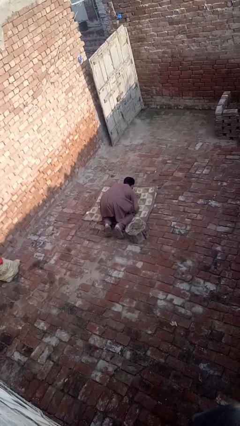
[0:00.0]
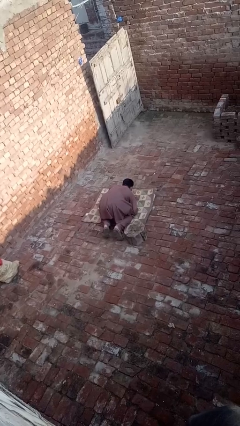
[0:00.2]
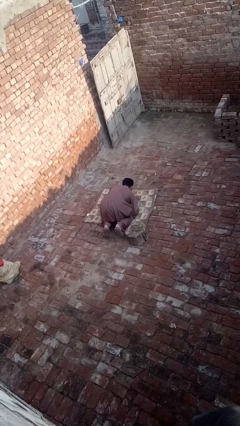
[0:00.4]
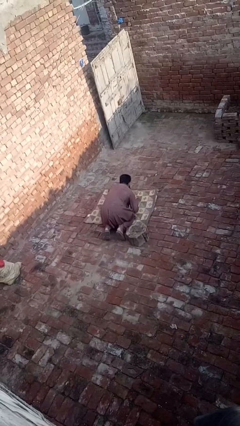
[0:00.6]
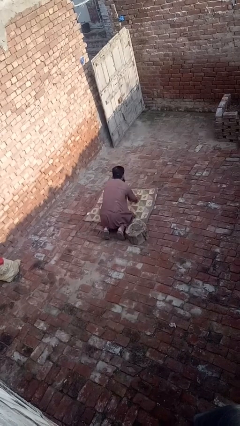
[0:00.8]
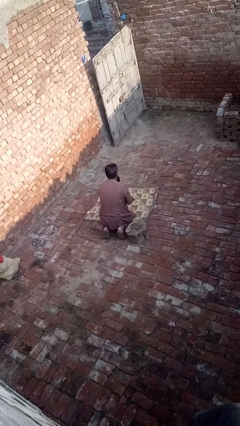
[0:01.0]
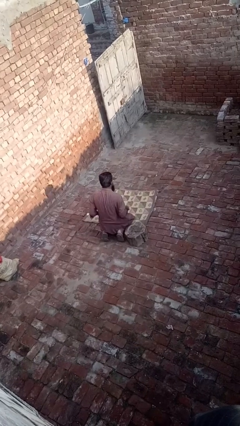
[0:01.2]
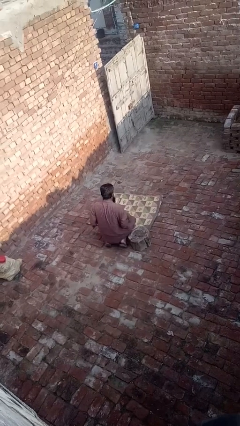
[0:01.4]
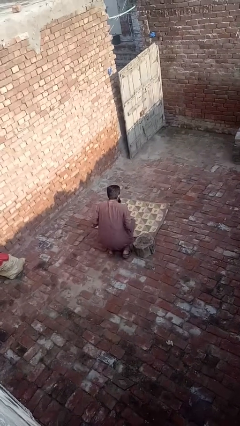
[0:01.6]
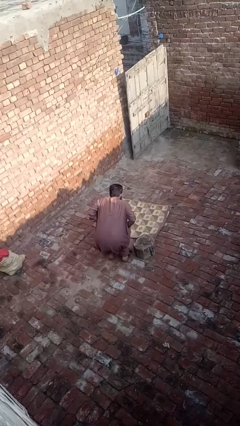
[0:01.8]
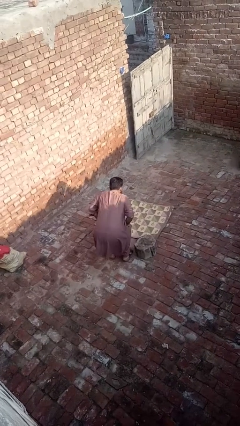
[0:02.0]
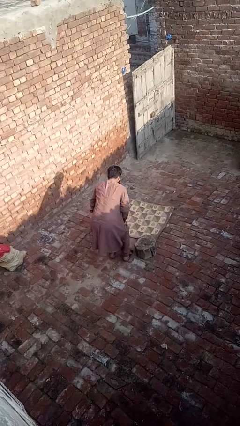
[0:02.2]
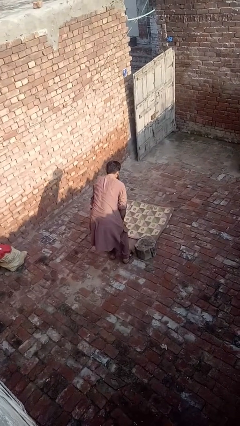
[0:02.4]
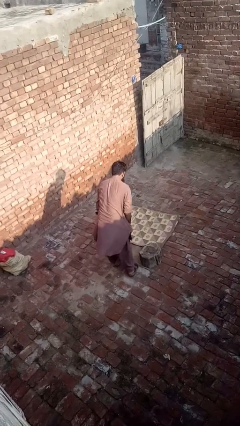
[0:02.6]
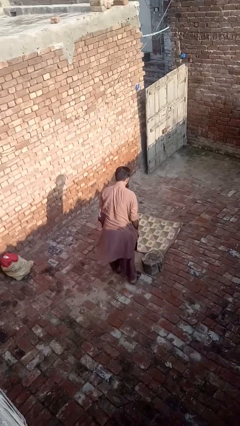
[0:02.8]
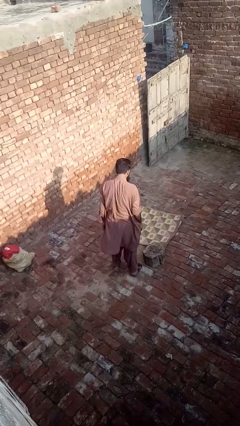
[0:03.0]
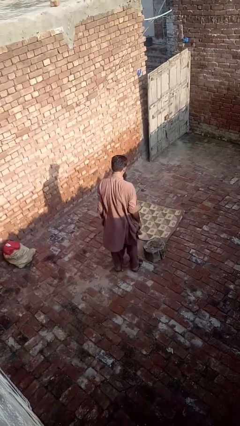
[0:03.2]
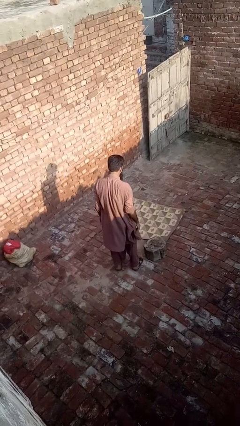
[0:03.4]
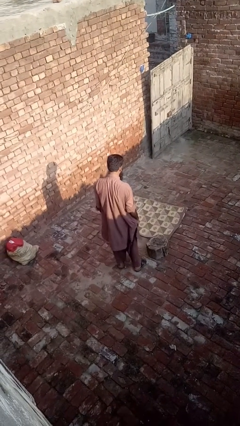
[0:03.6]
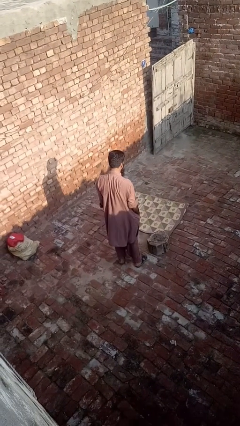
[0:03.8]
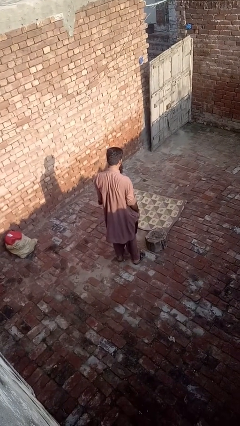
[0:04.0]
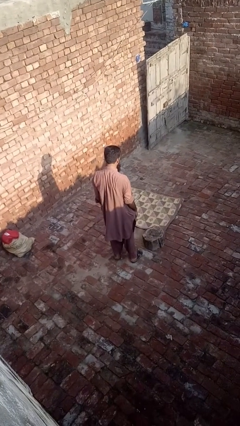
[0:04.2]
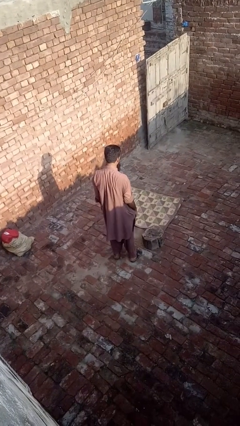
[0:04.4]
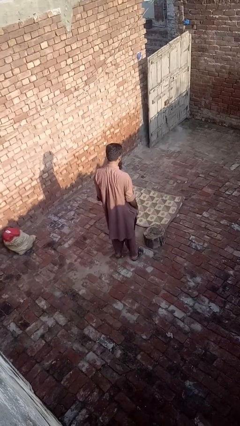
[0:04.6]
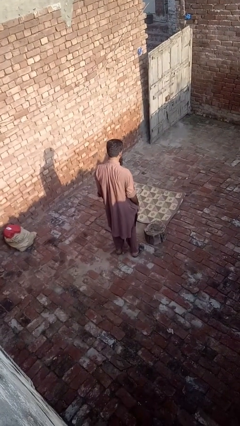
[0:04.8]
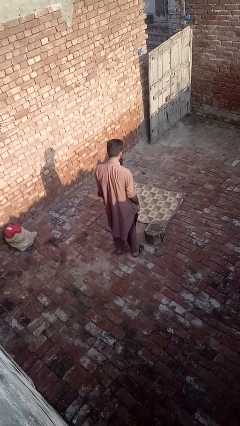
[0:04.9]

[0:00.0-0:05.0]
person stands up from floor

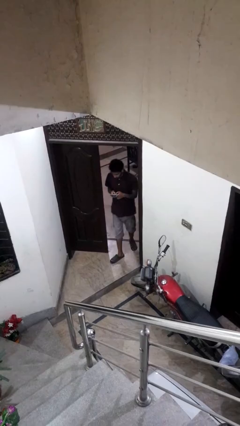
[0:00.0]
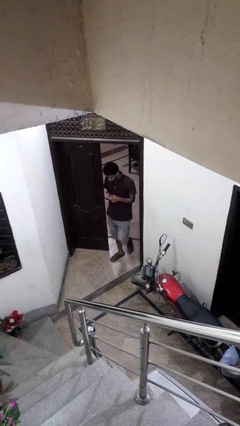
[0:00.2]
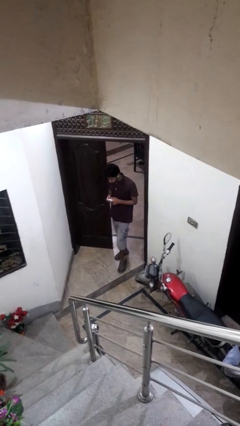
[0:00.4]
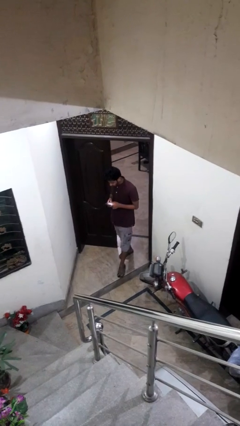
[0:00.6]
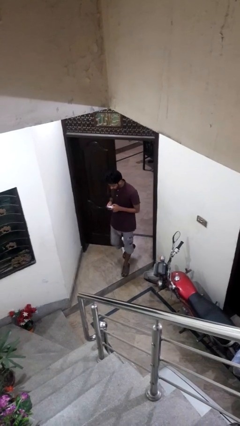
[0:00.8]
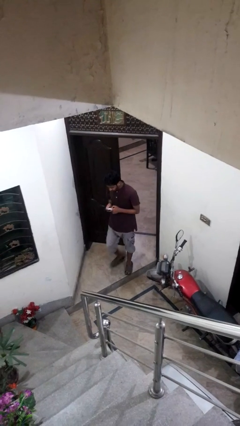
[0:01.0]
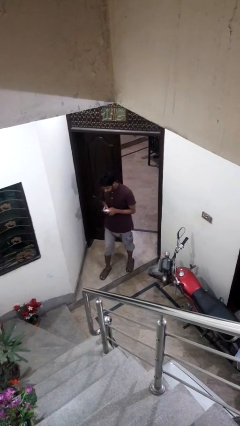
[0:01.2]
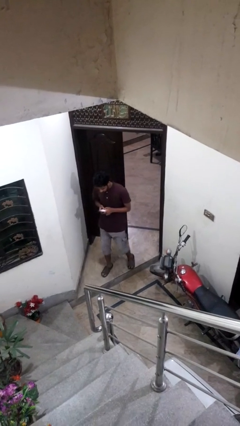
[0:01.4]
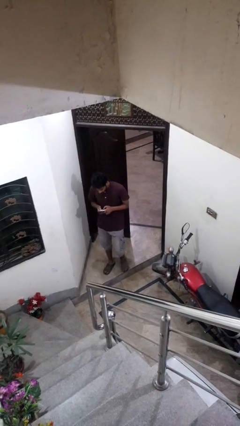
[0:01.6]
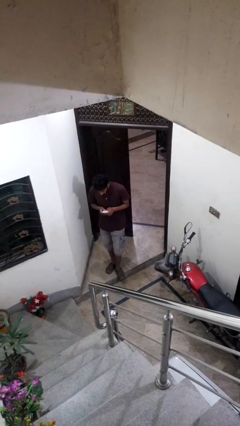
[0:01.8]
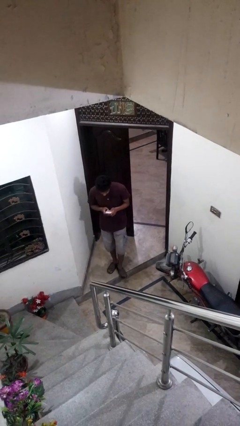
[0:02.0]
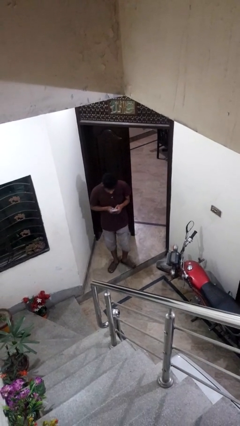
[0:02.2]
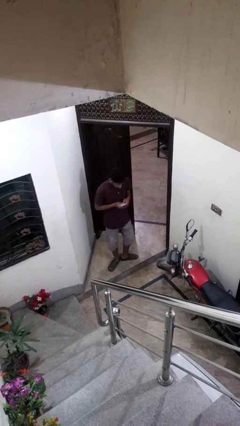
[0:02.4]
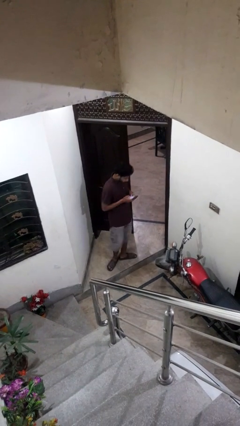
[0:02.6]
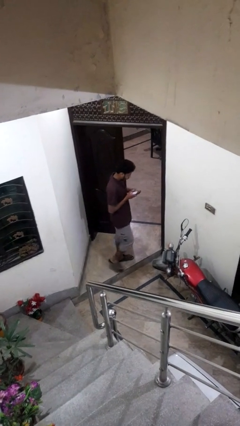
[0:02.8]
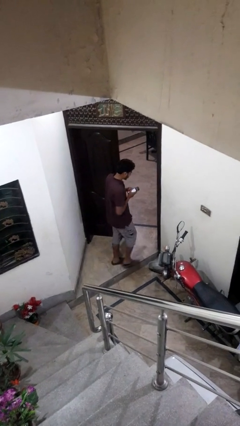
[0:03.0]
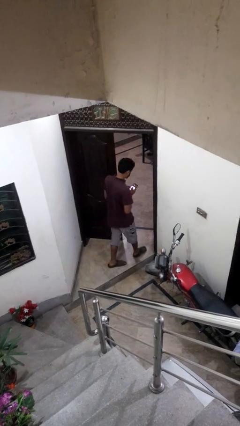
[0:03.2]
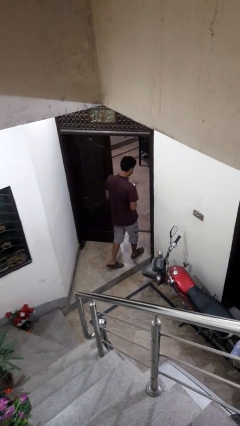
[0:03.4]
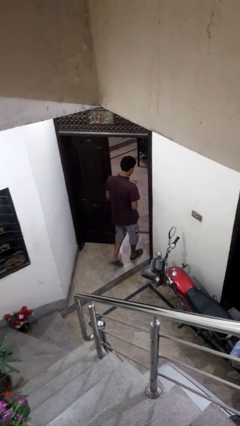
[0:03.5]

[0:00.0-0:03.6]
person enters scene through structure

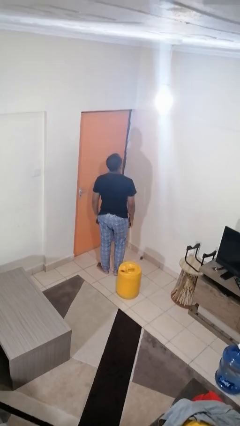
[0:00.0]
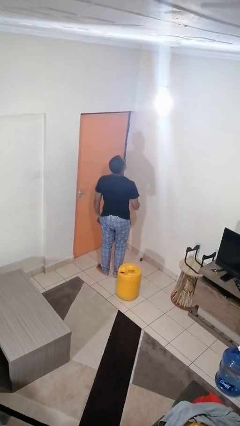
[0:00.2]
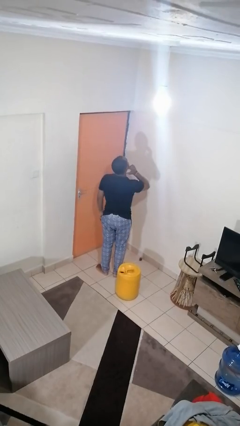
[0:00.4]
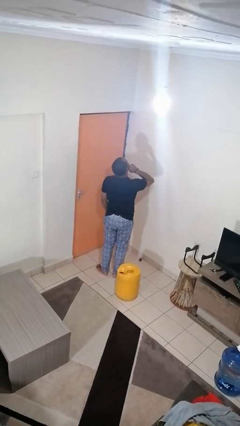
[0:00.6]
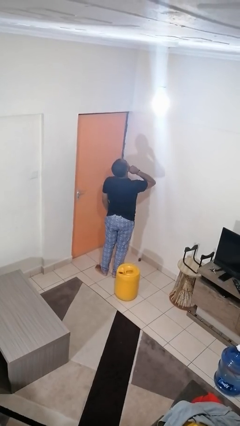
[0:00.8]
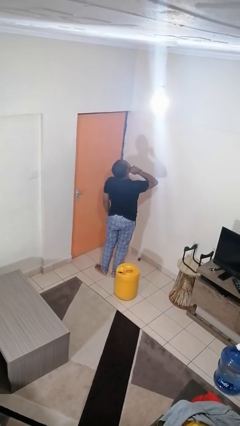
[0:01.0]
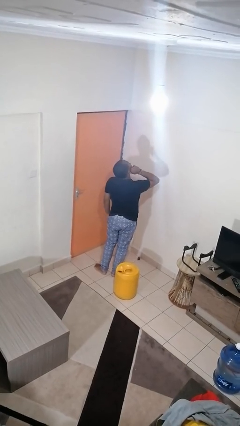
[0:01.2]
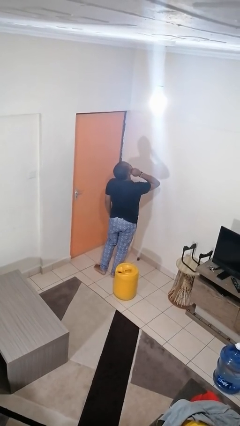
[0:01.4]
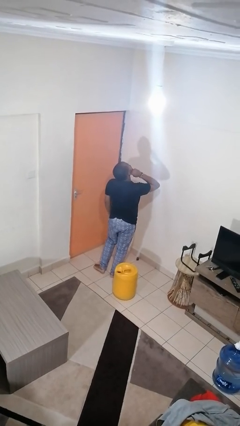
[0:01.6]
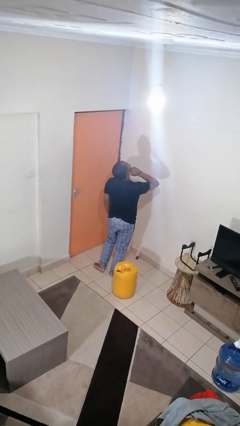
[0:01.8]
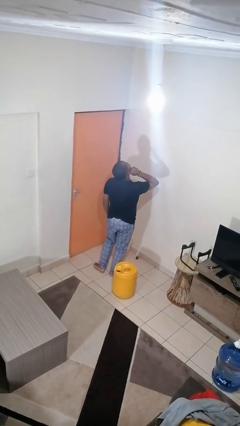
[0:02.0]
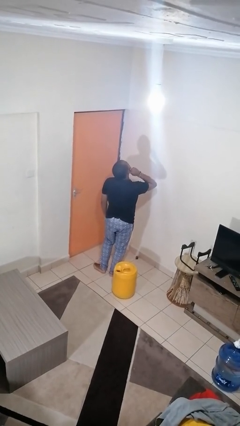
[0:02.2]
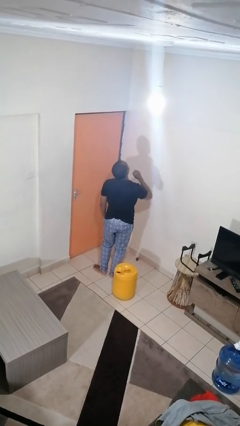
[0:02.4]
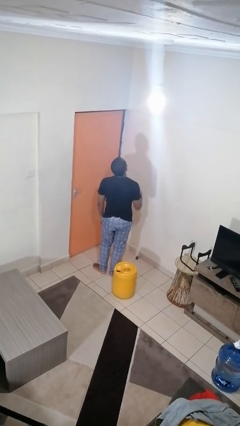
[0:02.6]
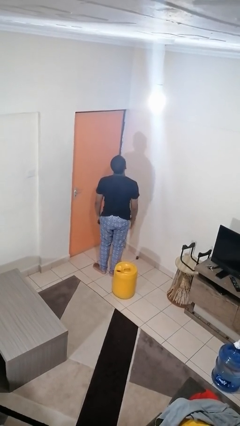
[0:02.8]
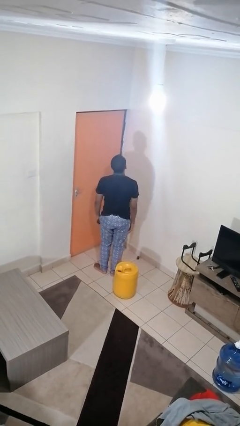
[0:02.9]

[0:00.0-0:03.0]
person touches earlobe

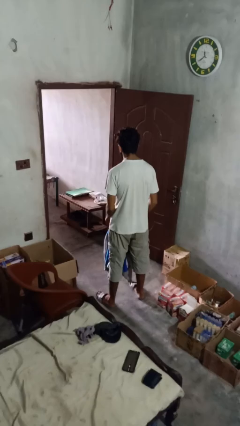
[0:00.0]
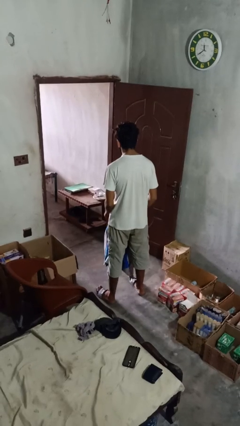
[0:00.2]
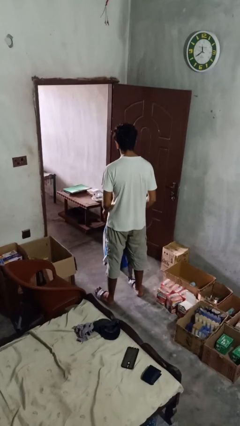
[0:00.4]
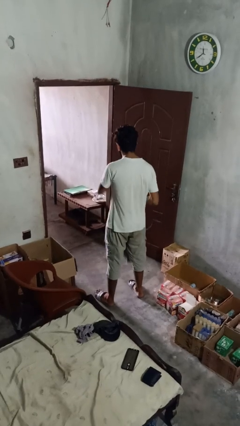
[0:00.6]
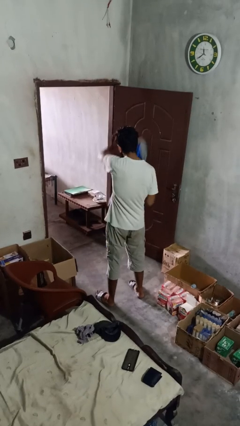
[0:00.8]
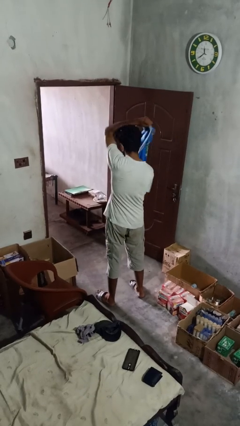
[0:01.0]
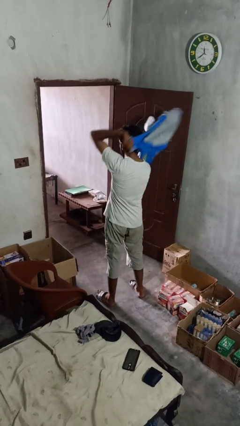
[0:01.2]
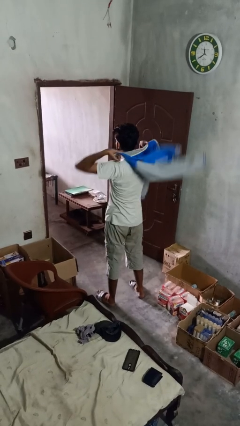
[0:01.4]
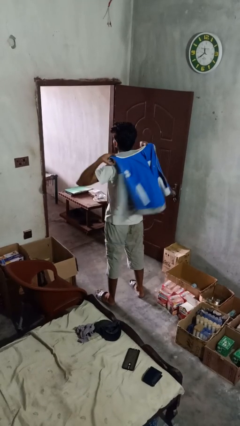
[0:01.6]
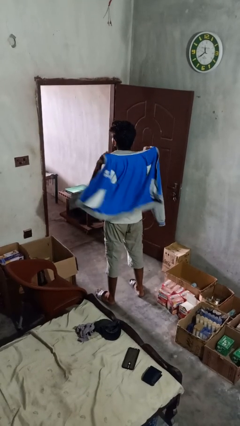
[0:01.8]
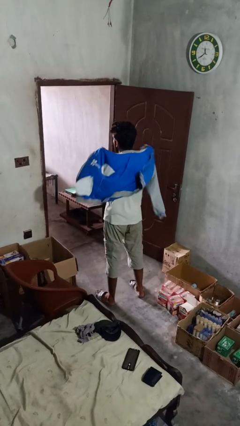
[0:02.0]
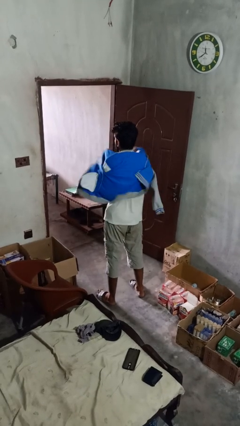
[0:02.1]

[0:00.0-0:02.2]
person puts on jacket

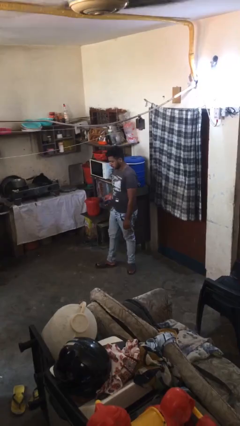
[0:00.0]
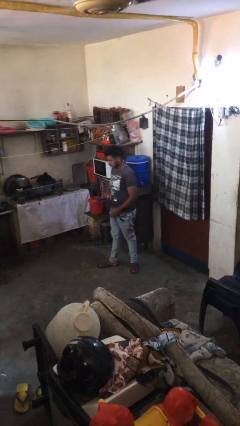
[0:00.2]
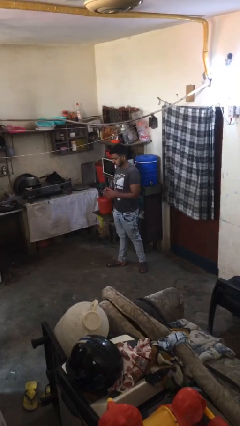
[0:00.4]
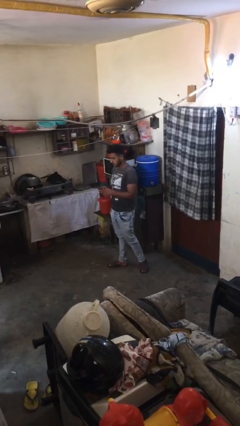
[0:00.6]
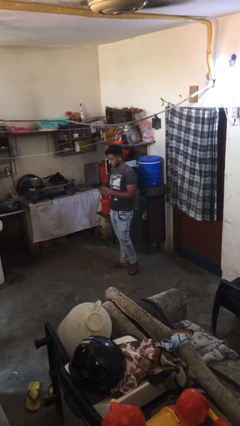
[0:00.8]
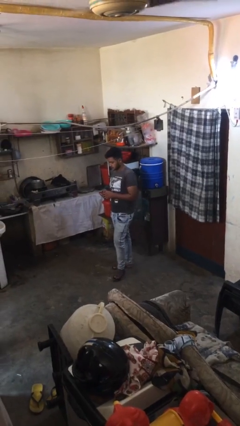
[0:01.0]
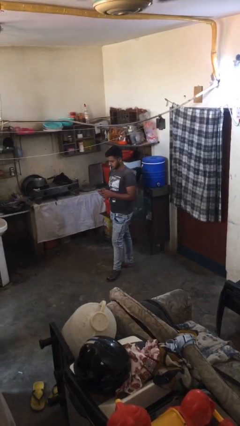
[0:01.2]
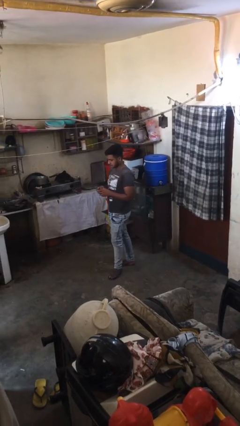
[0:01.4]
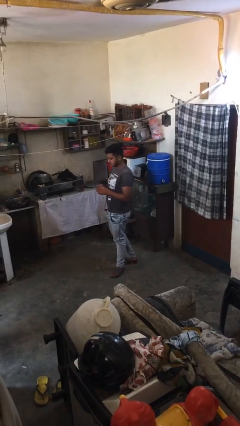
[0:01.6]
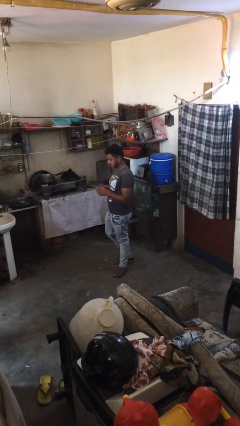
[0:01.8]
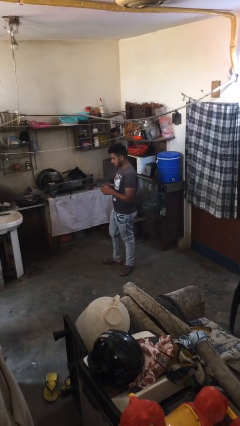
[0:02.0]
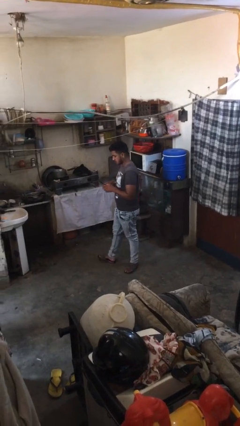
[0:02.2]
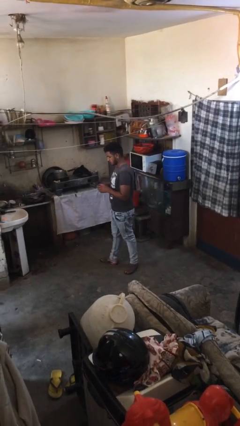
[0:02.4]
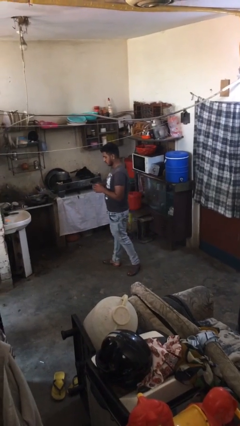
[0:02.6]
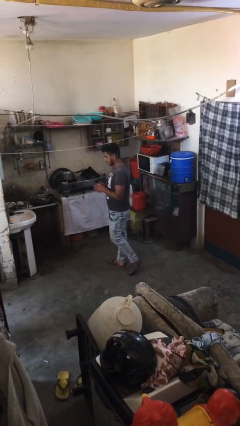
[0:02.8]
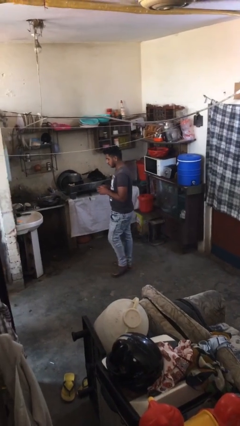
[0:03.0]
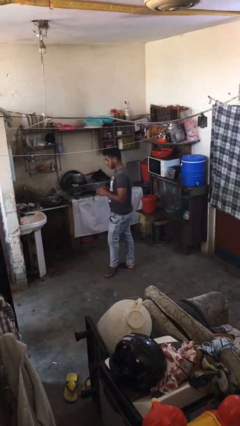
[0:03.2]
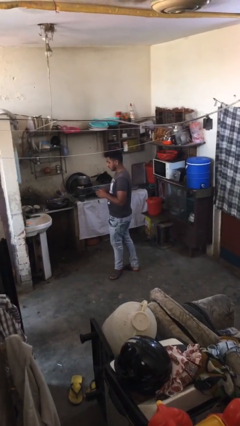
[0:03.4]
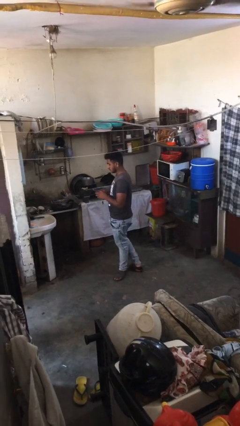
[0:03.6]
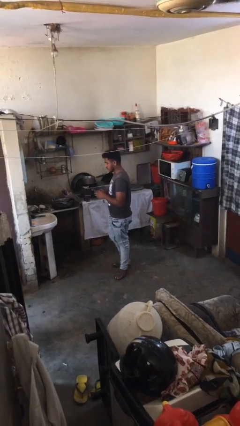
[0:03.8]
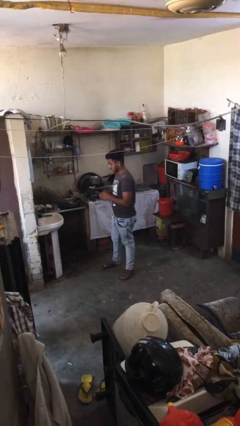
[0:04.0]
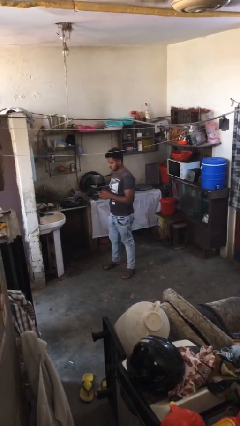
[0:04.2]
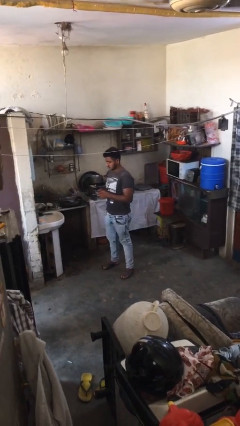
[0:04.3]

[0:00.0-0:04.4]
person texts on phone
